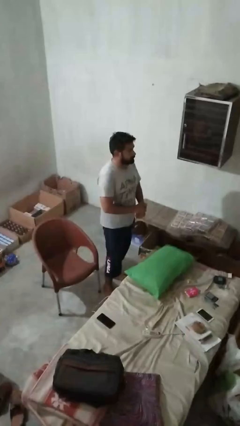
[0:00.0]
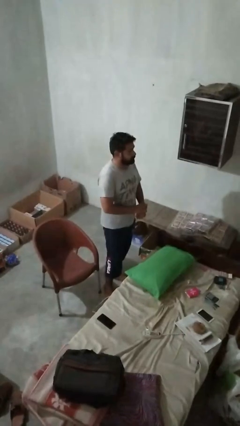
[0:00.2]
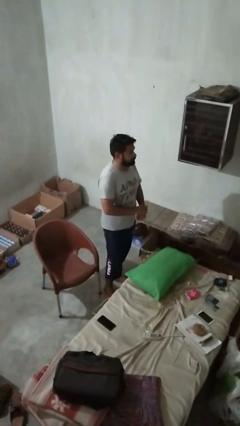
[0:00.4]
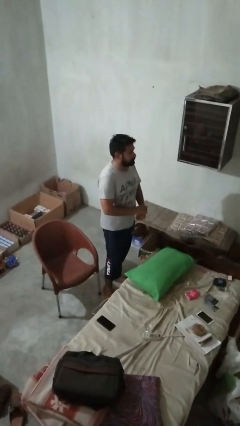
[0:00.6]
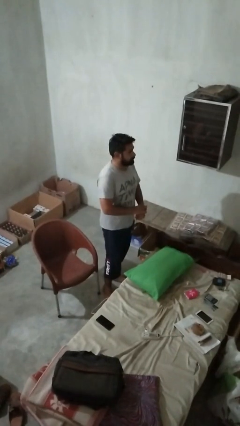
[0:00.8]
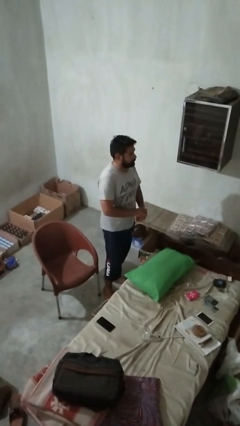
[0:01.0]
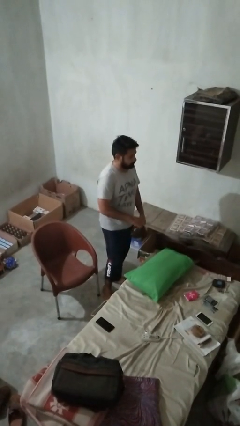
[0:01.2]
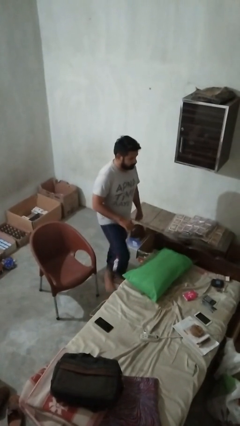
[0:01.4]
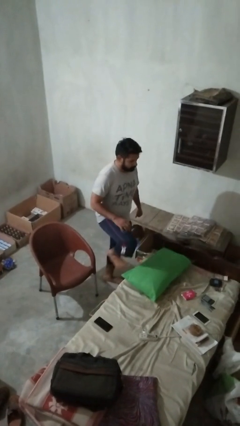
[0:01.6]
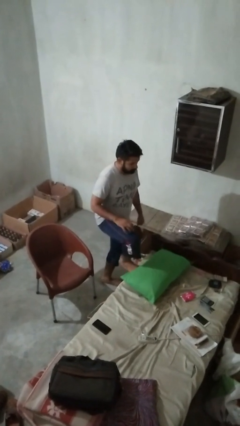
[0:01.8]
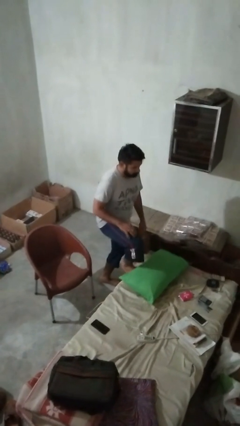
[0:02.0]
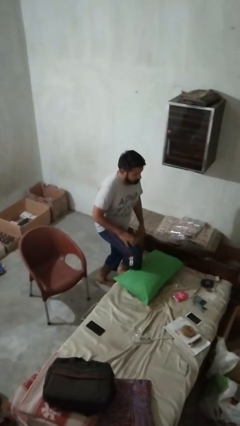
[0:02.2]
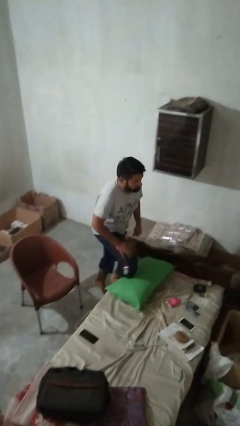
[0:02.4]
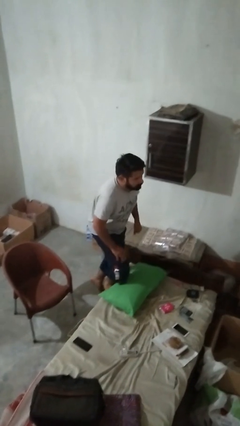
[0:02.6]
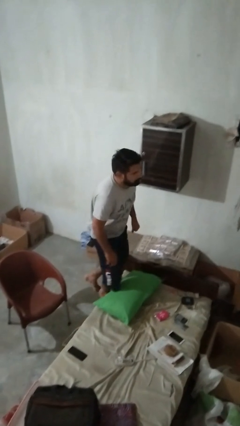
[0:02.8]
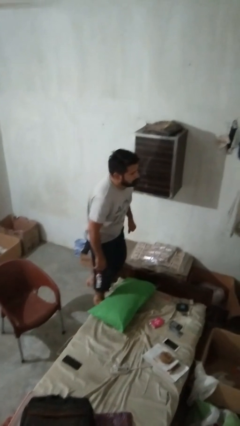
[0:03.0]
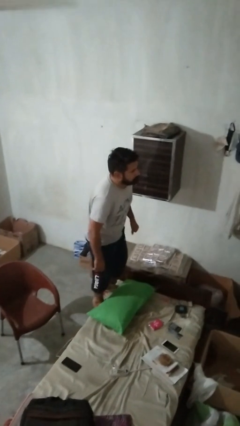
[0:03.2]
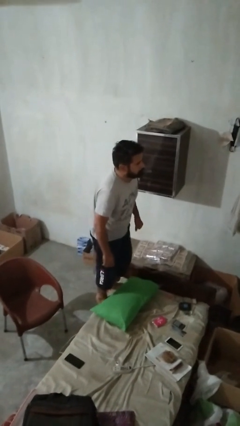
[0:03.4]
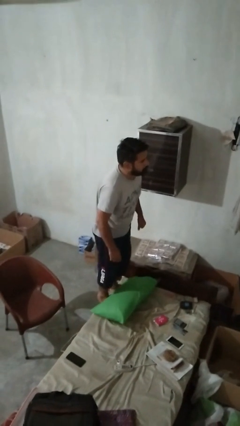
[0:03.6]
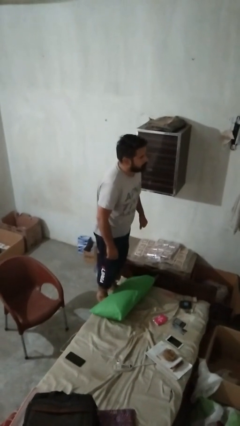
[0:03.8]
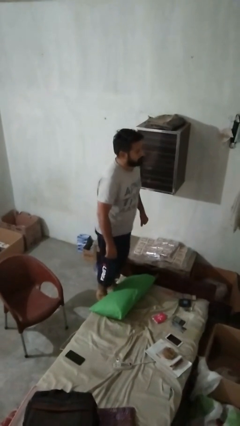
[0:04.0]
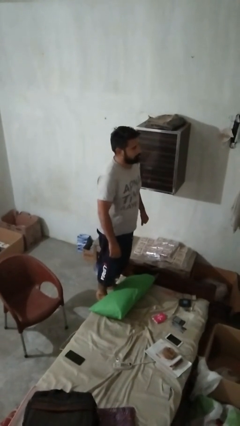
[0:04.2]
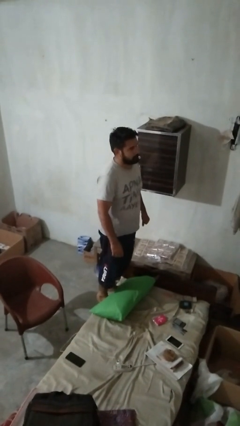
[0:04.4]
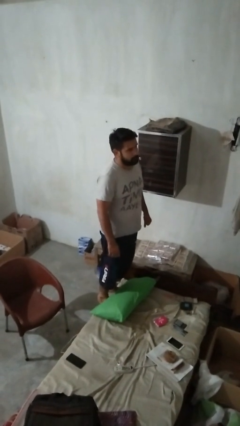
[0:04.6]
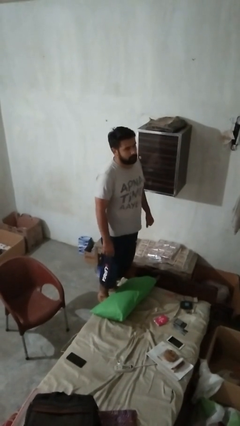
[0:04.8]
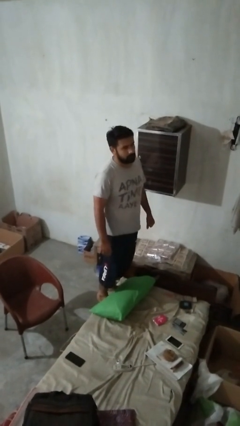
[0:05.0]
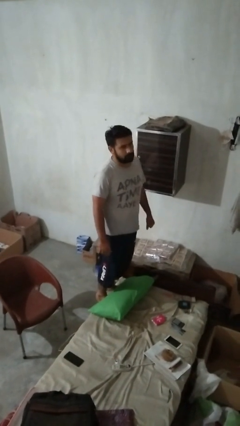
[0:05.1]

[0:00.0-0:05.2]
person climbs on couch

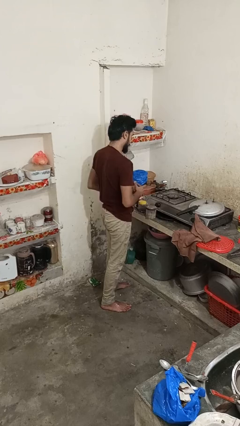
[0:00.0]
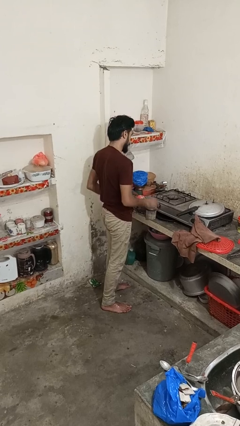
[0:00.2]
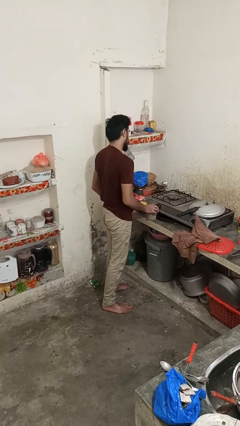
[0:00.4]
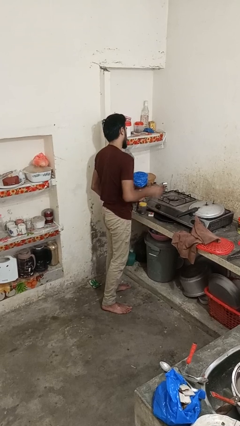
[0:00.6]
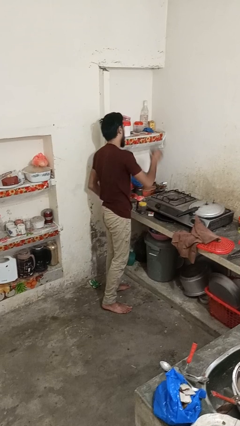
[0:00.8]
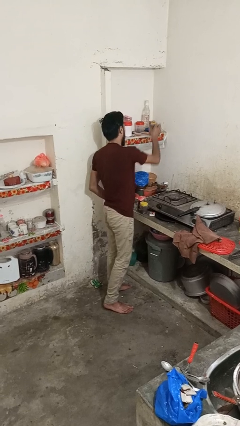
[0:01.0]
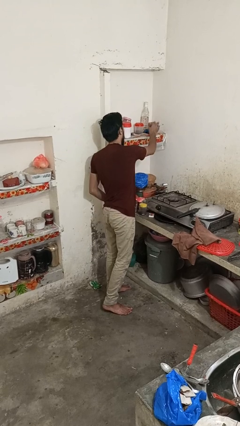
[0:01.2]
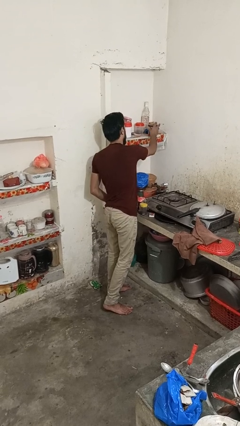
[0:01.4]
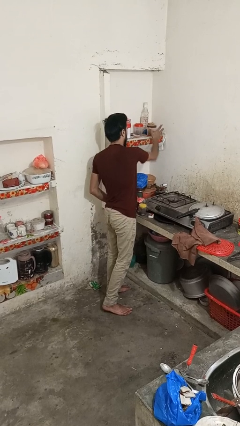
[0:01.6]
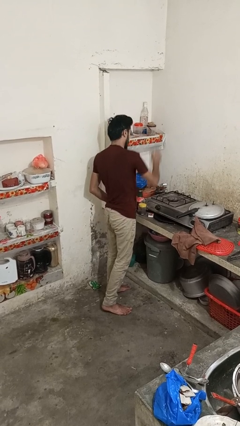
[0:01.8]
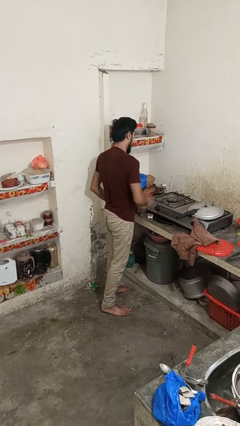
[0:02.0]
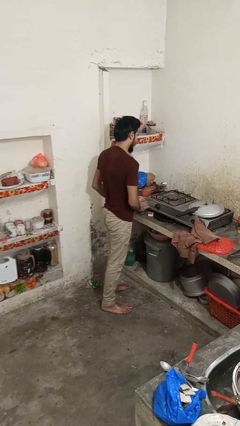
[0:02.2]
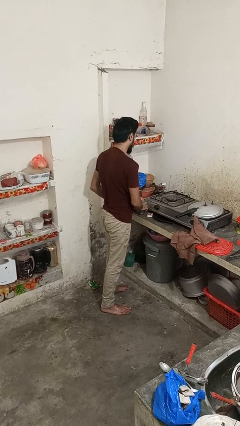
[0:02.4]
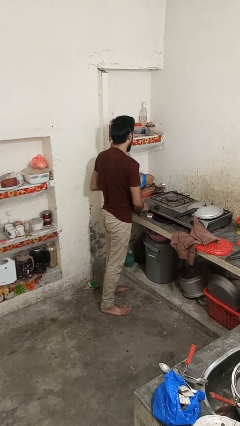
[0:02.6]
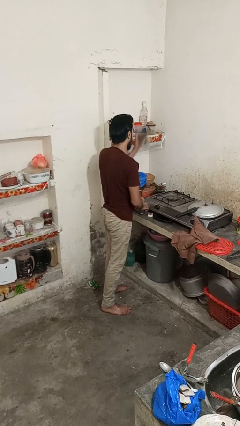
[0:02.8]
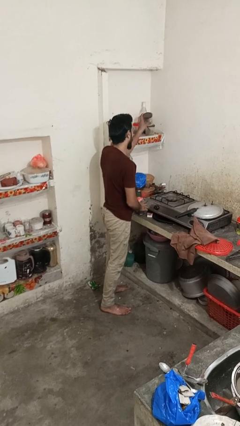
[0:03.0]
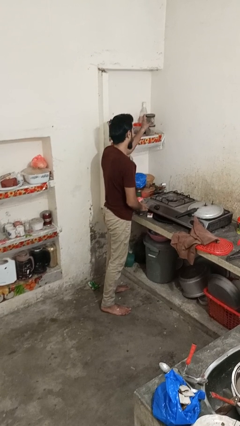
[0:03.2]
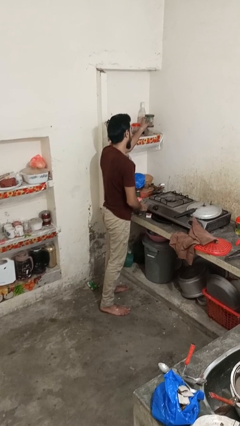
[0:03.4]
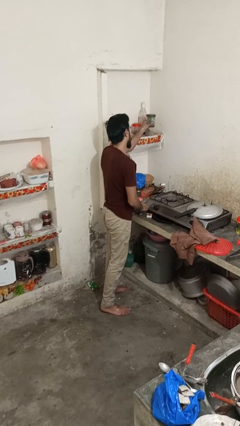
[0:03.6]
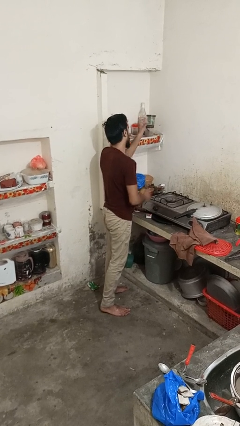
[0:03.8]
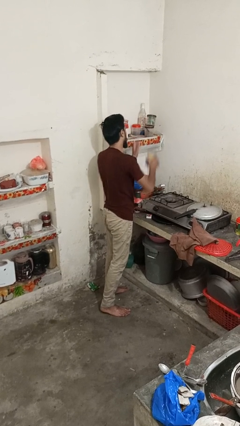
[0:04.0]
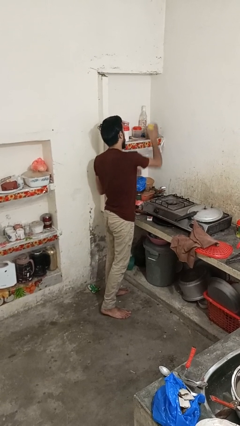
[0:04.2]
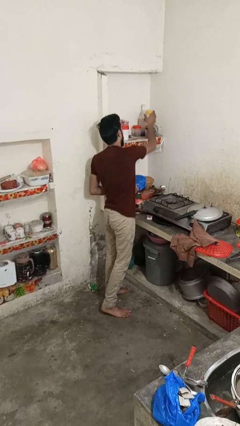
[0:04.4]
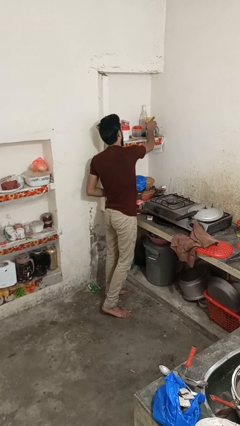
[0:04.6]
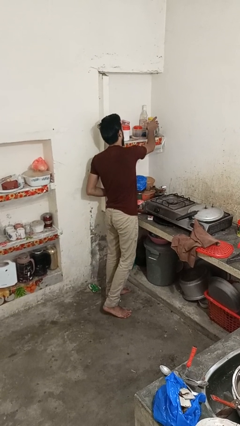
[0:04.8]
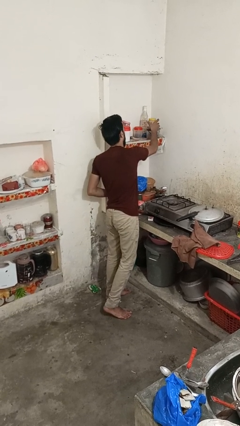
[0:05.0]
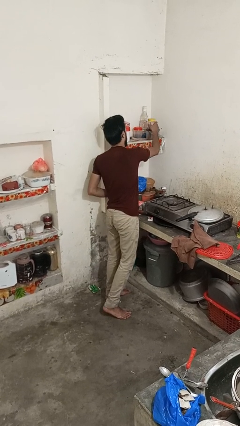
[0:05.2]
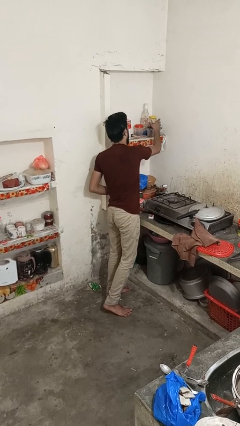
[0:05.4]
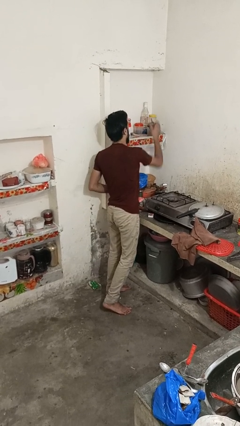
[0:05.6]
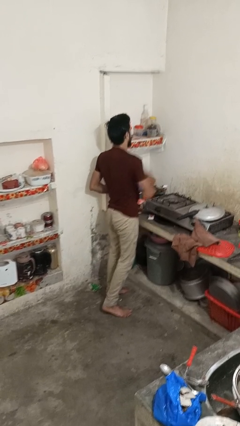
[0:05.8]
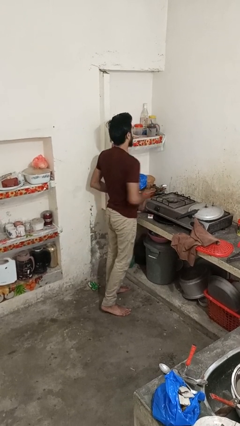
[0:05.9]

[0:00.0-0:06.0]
person loads groceries into cabinet

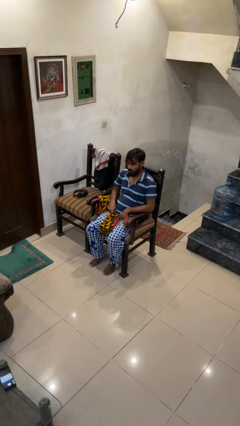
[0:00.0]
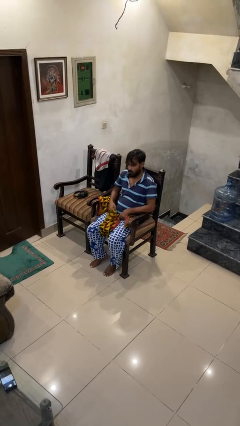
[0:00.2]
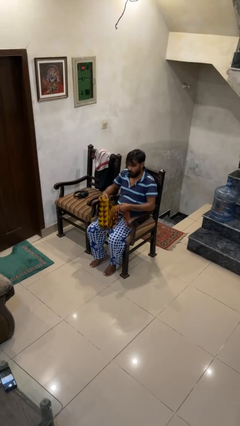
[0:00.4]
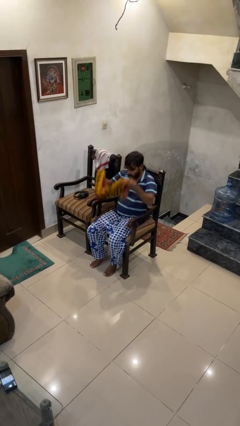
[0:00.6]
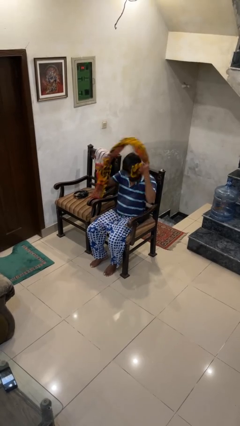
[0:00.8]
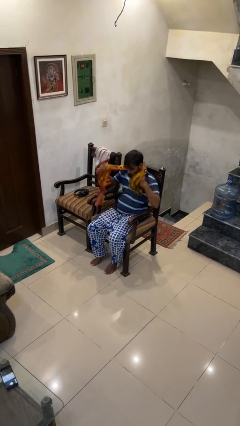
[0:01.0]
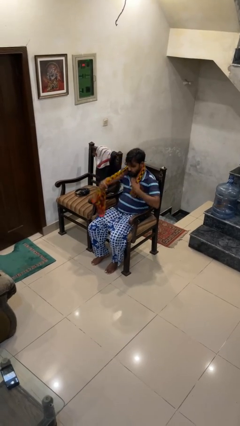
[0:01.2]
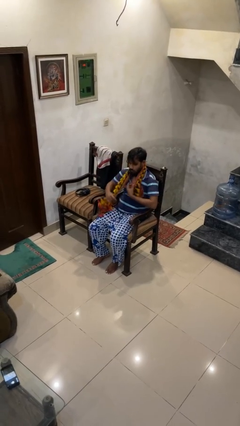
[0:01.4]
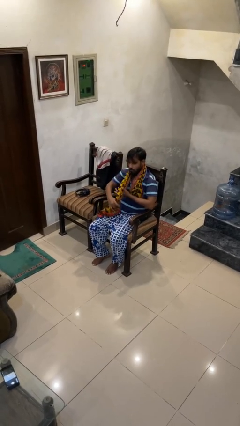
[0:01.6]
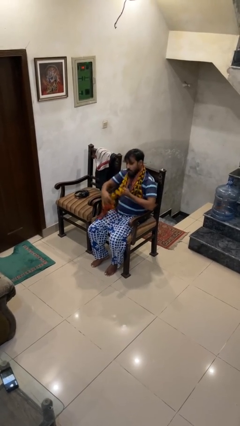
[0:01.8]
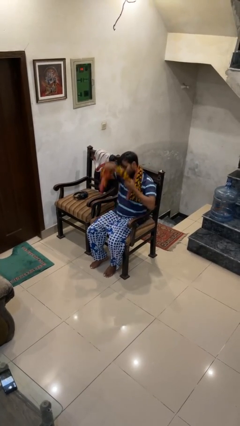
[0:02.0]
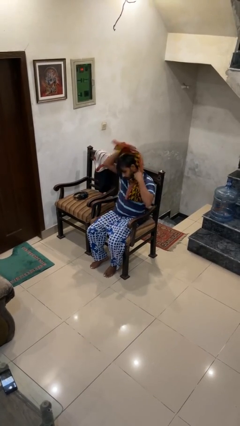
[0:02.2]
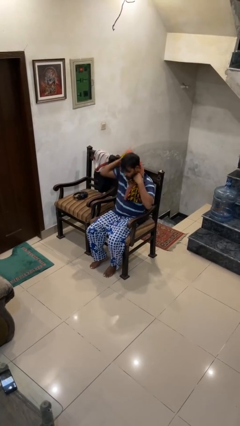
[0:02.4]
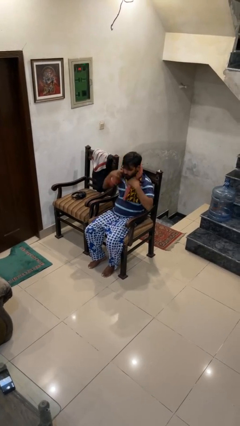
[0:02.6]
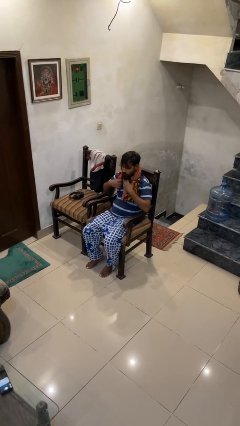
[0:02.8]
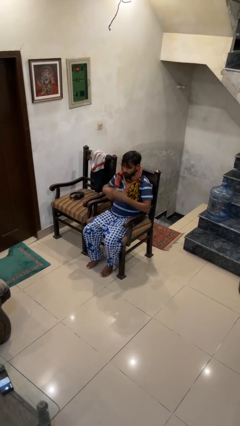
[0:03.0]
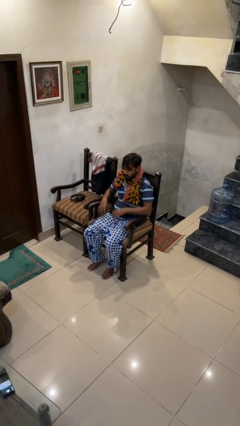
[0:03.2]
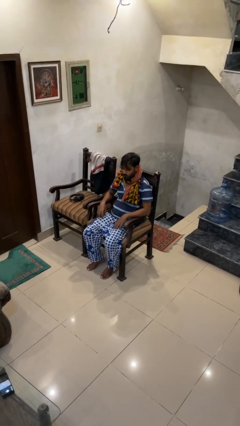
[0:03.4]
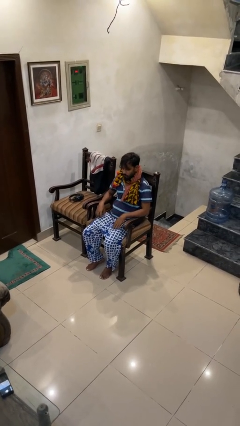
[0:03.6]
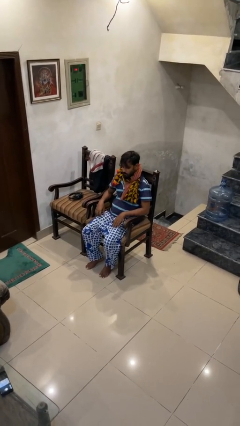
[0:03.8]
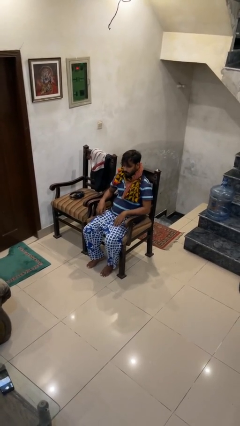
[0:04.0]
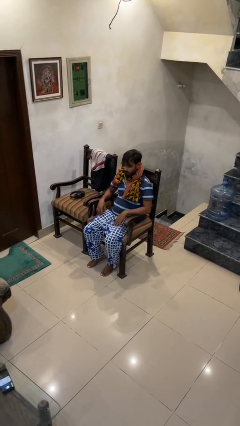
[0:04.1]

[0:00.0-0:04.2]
person puts on scarf

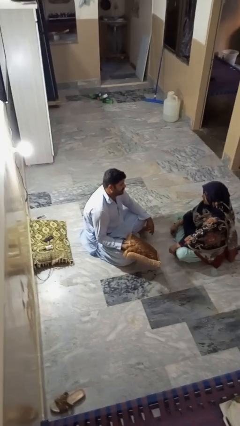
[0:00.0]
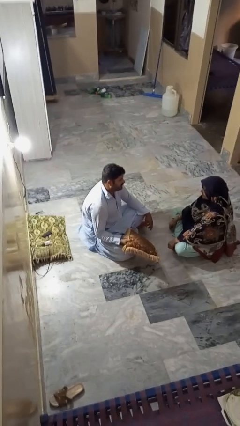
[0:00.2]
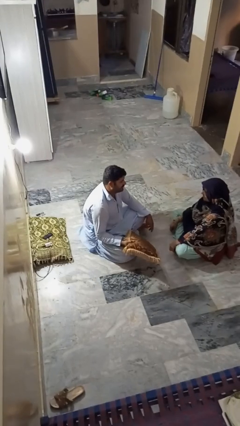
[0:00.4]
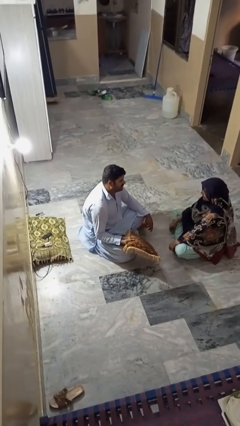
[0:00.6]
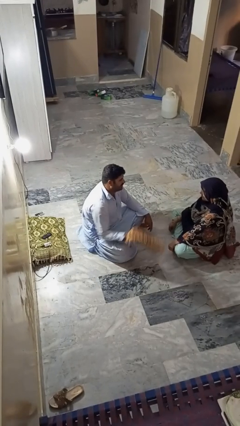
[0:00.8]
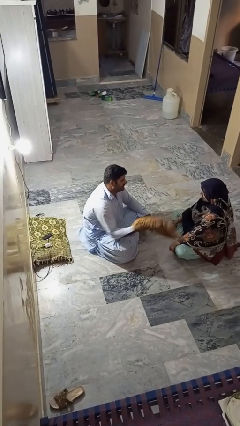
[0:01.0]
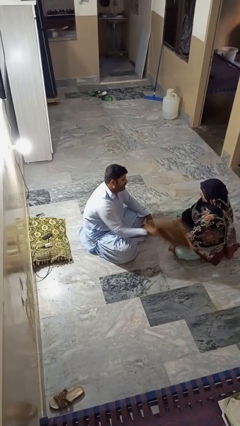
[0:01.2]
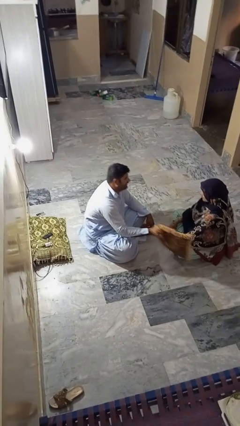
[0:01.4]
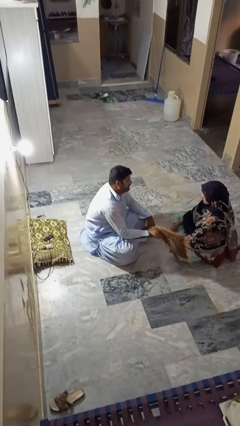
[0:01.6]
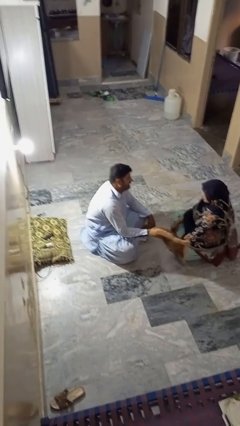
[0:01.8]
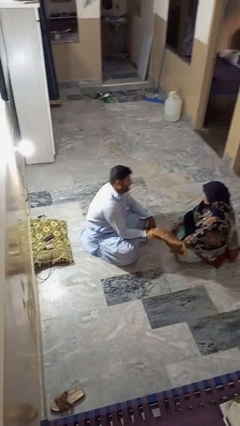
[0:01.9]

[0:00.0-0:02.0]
person hits person with pillow

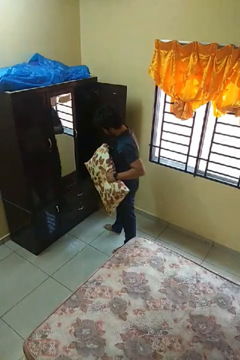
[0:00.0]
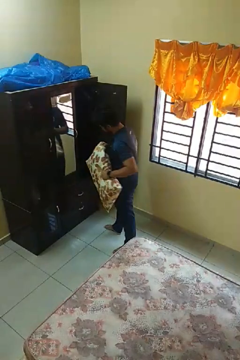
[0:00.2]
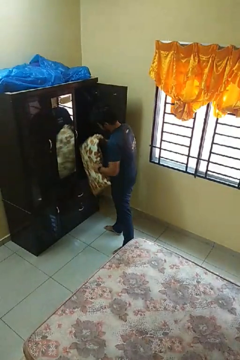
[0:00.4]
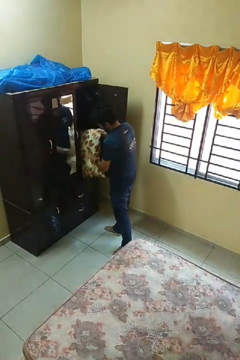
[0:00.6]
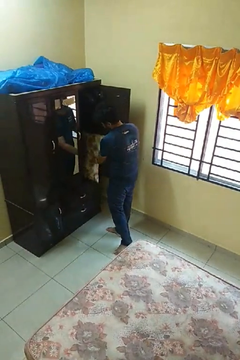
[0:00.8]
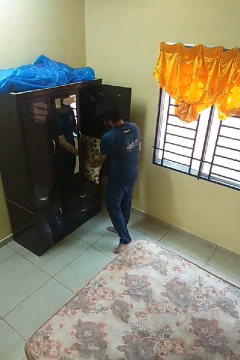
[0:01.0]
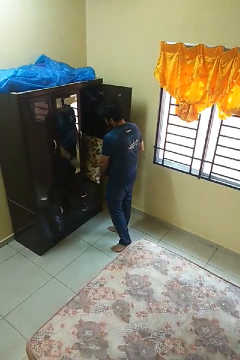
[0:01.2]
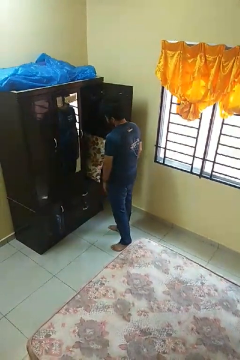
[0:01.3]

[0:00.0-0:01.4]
person puts down object into cabinet
